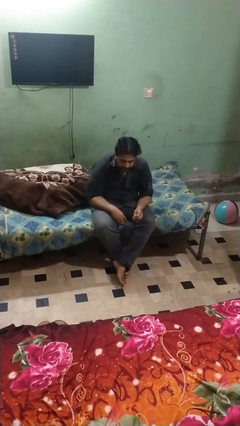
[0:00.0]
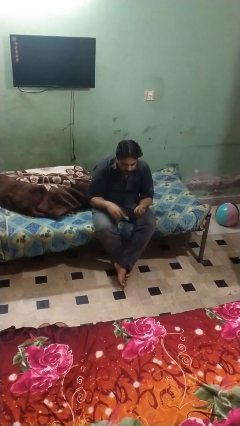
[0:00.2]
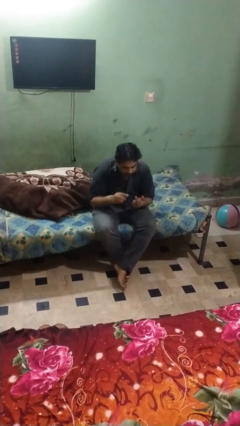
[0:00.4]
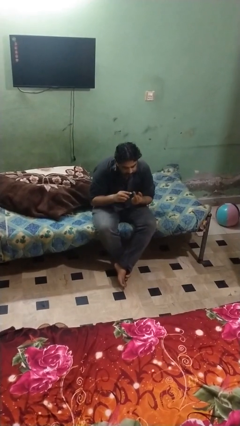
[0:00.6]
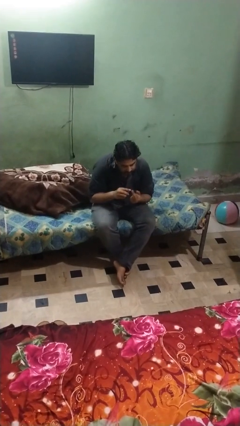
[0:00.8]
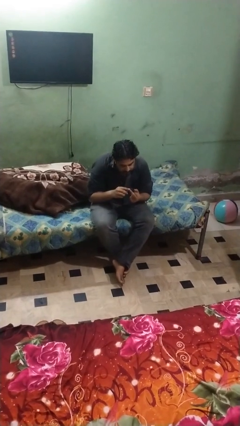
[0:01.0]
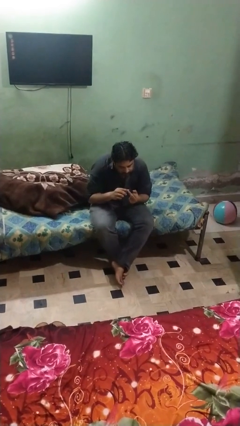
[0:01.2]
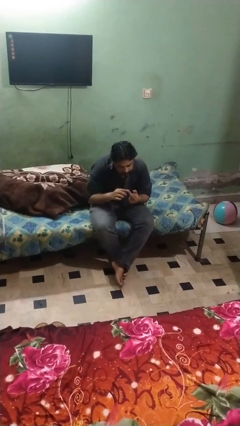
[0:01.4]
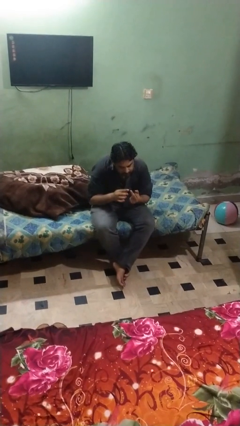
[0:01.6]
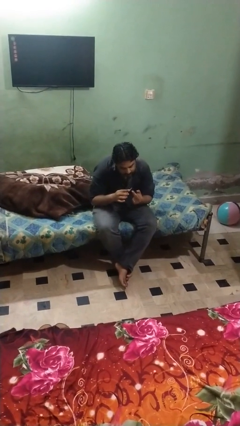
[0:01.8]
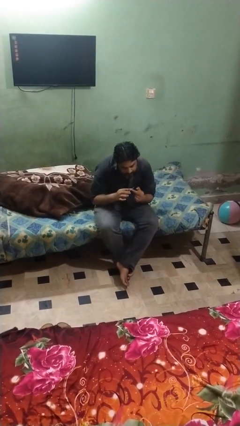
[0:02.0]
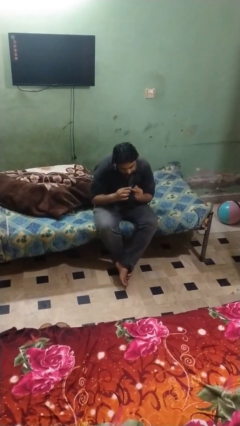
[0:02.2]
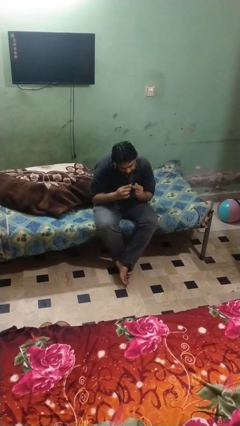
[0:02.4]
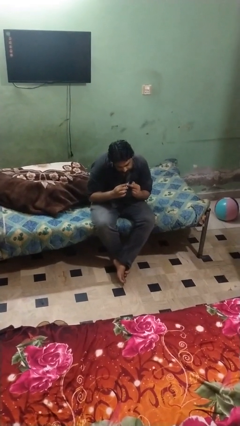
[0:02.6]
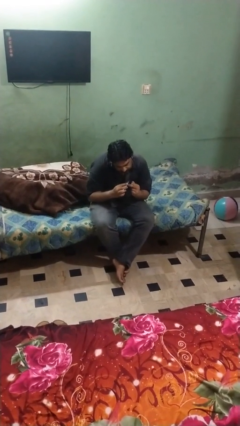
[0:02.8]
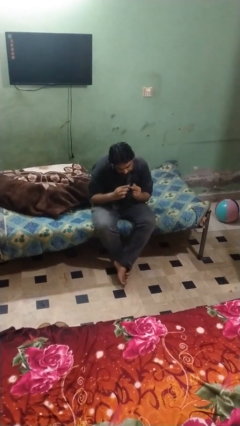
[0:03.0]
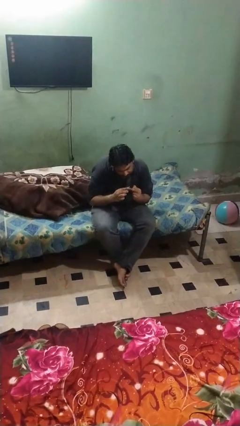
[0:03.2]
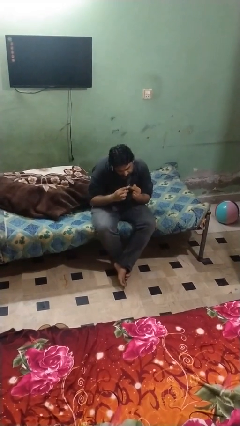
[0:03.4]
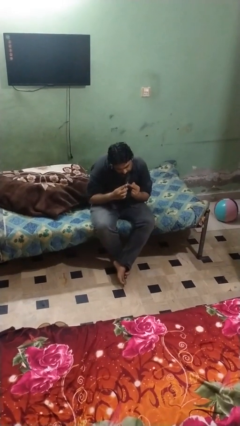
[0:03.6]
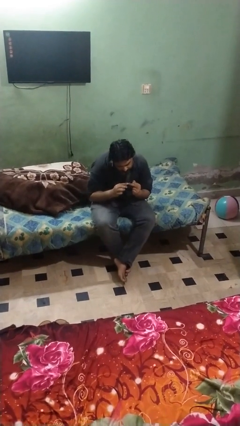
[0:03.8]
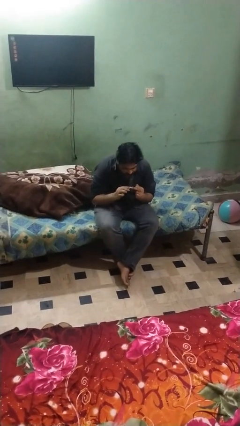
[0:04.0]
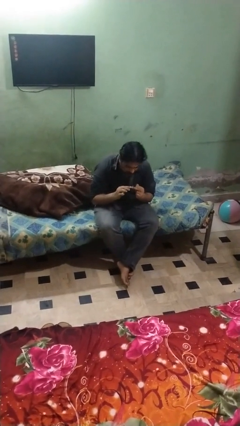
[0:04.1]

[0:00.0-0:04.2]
person files fingernails

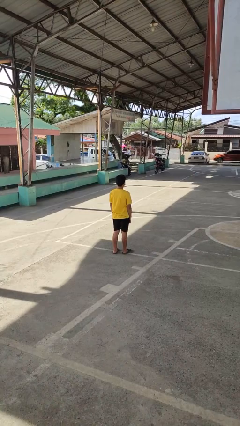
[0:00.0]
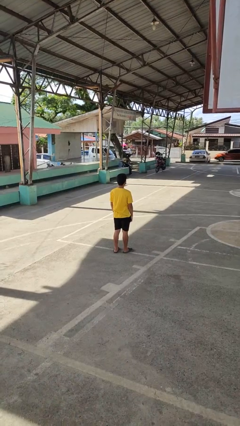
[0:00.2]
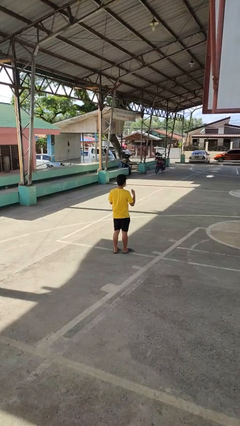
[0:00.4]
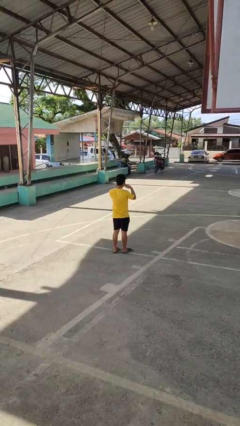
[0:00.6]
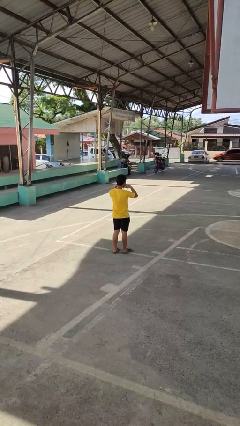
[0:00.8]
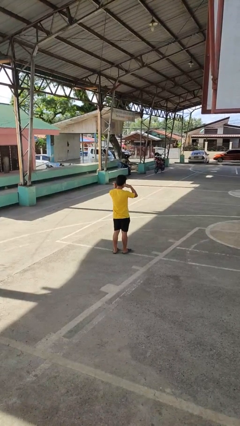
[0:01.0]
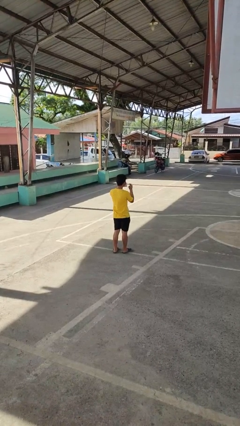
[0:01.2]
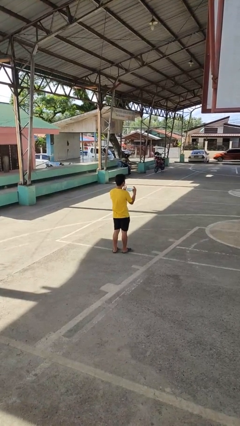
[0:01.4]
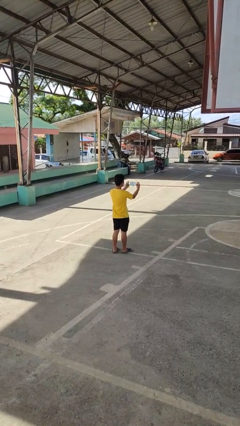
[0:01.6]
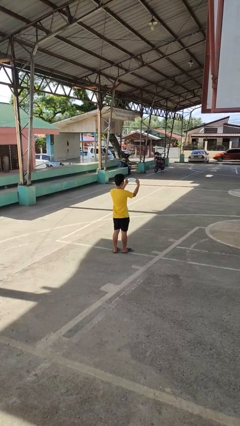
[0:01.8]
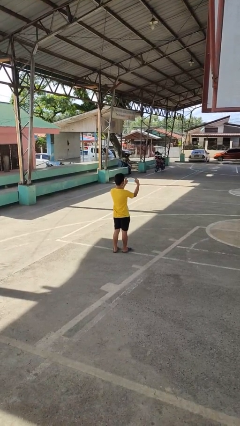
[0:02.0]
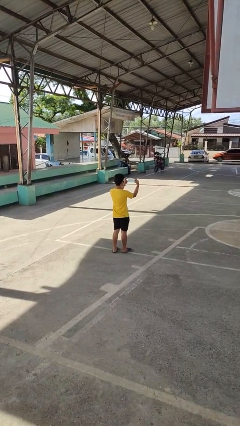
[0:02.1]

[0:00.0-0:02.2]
person takes off facemask

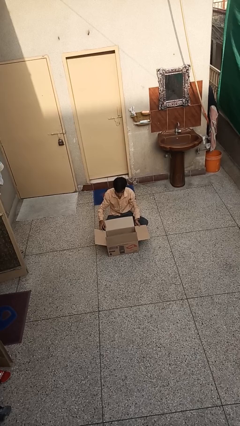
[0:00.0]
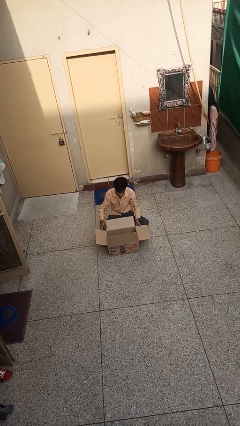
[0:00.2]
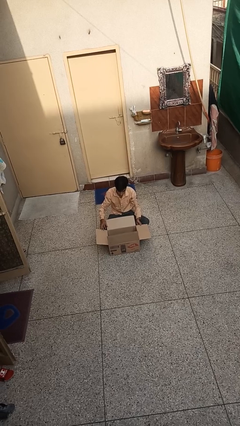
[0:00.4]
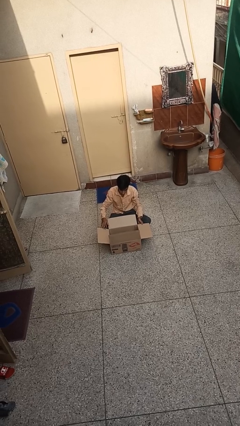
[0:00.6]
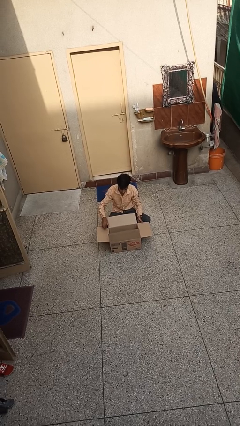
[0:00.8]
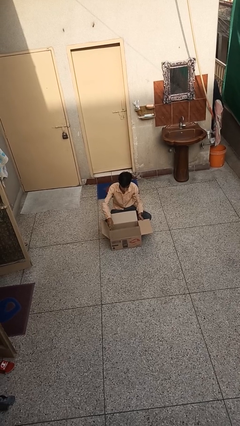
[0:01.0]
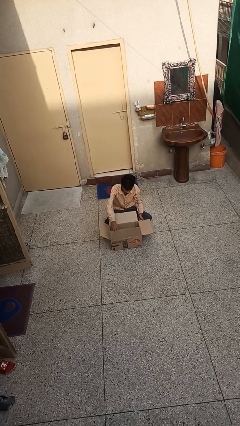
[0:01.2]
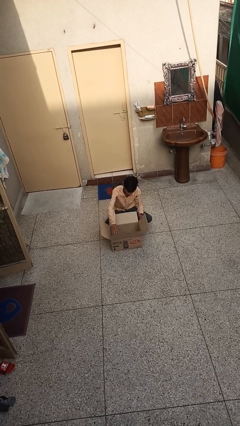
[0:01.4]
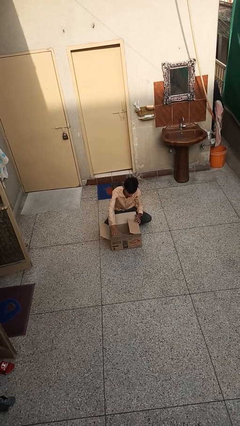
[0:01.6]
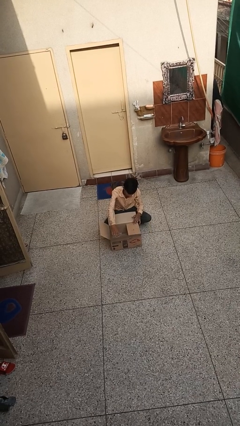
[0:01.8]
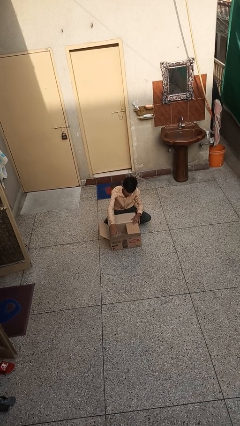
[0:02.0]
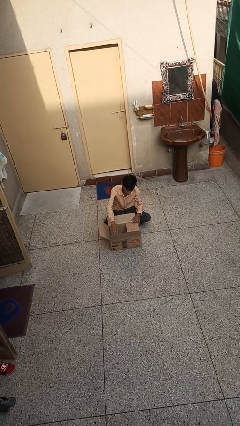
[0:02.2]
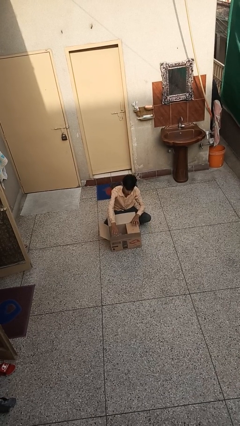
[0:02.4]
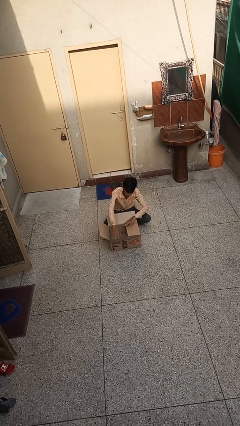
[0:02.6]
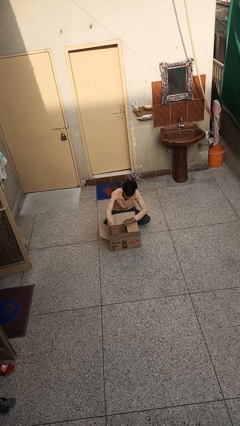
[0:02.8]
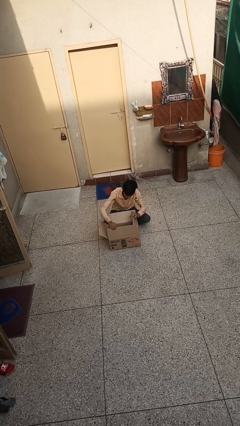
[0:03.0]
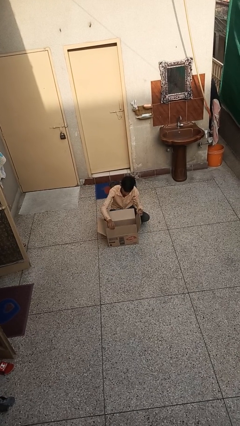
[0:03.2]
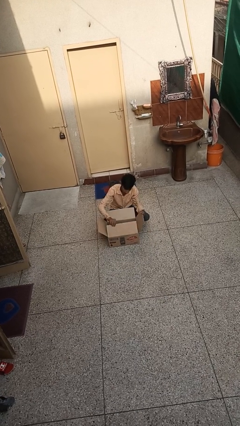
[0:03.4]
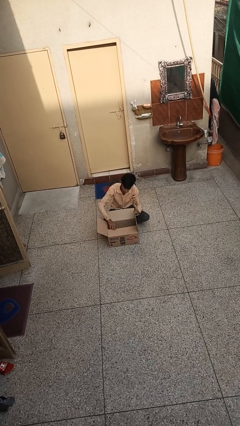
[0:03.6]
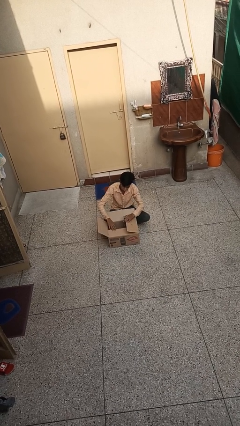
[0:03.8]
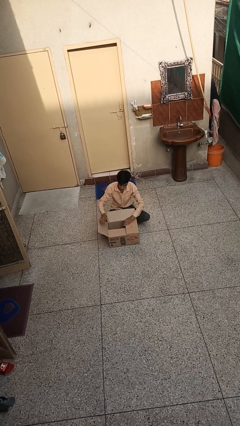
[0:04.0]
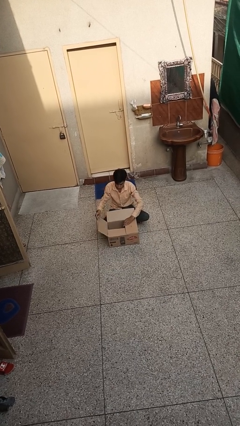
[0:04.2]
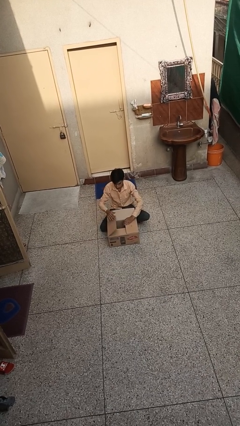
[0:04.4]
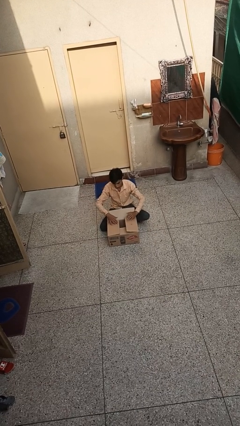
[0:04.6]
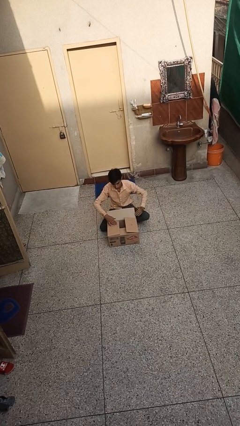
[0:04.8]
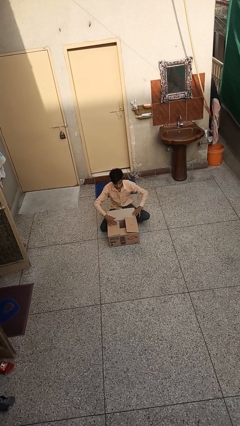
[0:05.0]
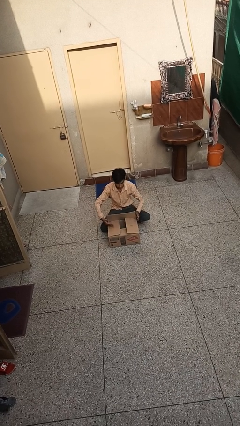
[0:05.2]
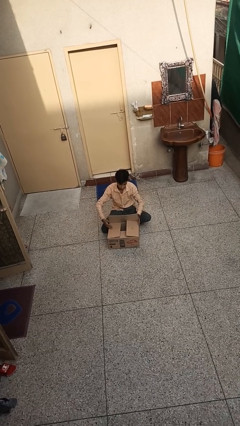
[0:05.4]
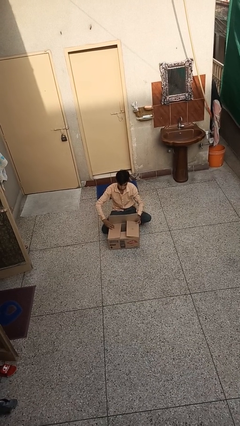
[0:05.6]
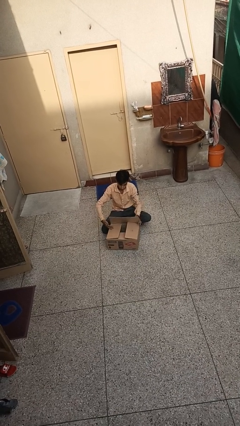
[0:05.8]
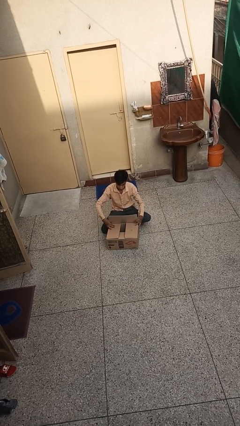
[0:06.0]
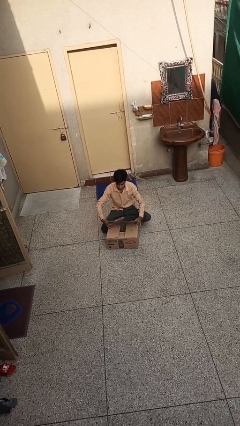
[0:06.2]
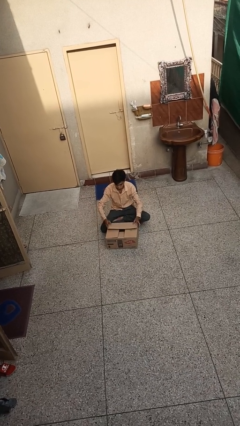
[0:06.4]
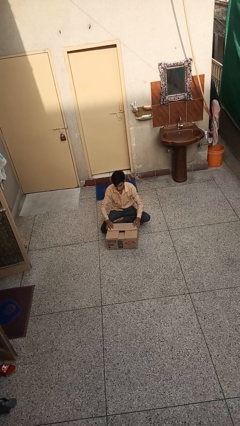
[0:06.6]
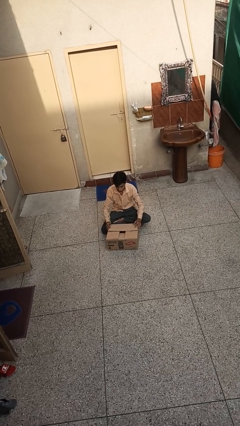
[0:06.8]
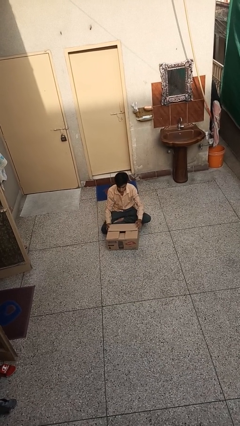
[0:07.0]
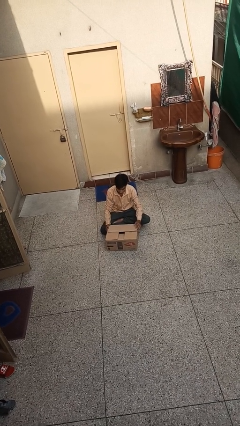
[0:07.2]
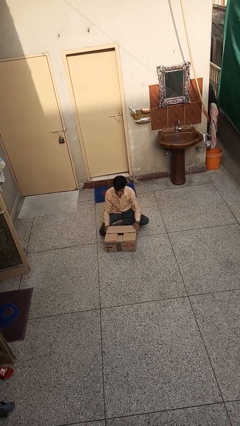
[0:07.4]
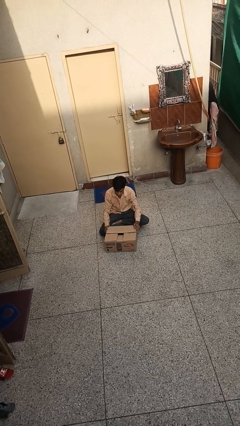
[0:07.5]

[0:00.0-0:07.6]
person closes box

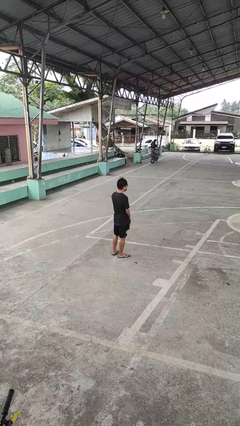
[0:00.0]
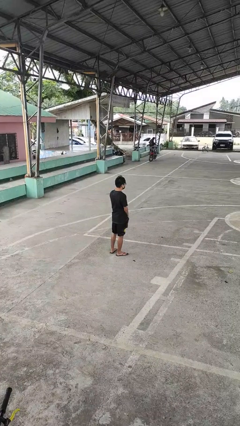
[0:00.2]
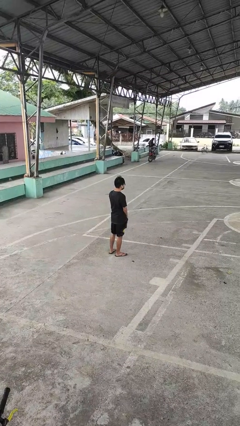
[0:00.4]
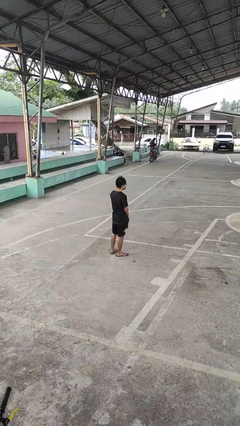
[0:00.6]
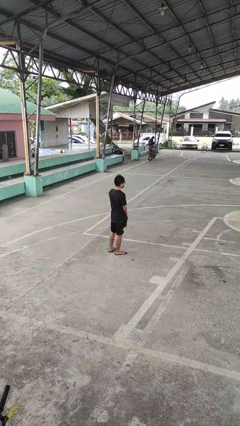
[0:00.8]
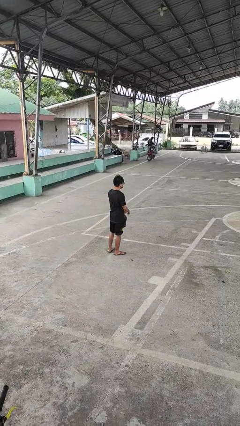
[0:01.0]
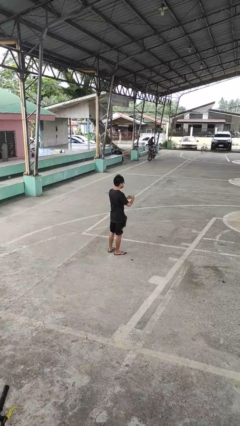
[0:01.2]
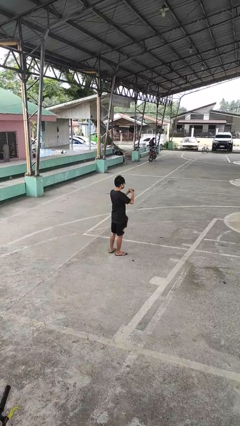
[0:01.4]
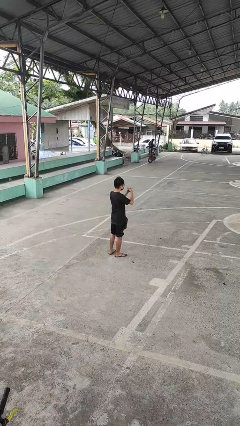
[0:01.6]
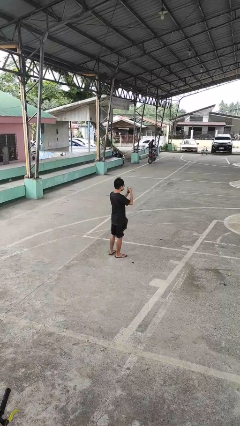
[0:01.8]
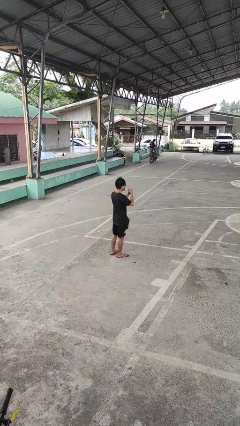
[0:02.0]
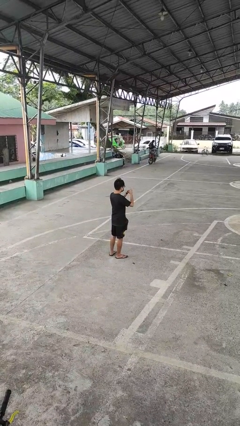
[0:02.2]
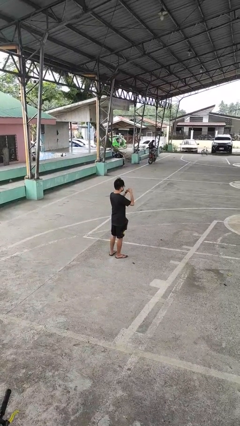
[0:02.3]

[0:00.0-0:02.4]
person cracks knuckles

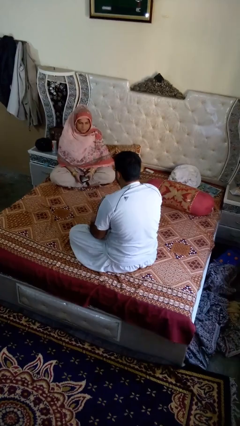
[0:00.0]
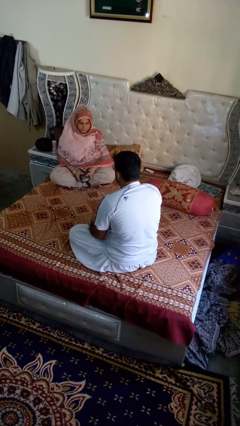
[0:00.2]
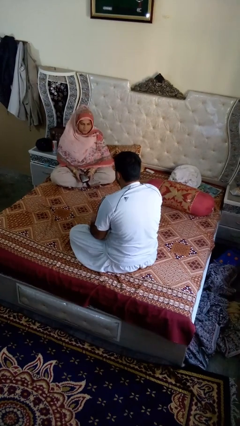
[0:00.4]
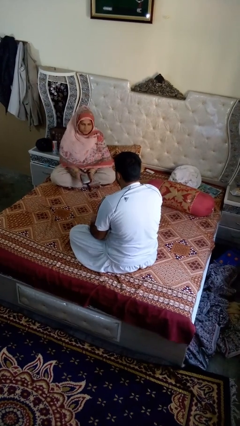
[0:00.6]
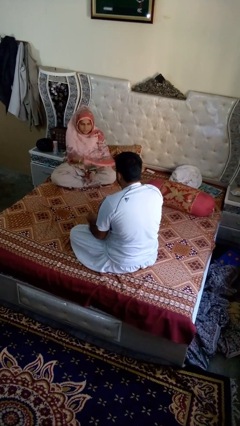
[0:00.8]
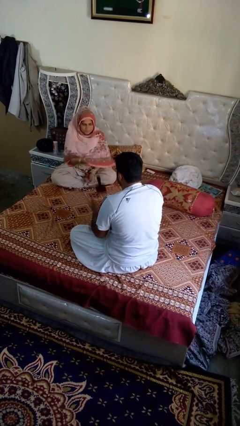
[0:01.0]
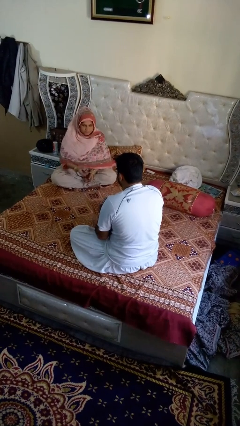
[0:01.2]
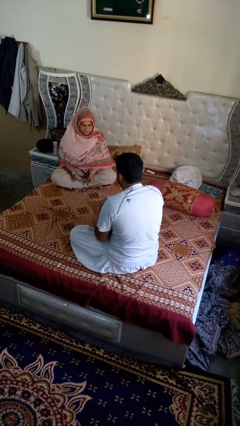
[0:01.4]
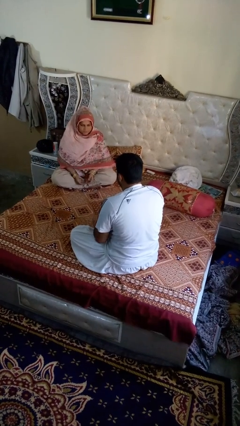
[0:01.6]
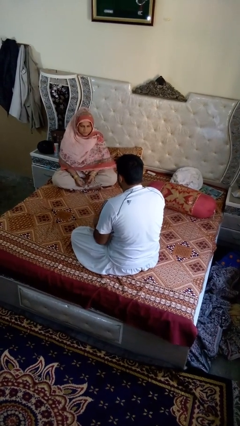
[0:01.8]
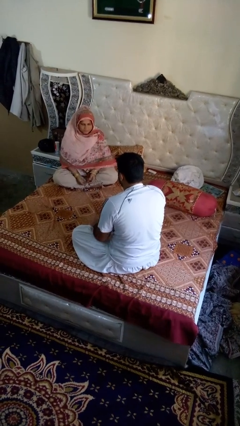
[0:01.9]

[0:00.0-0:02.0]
person catches object from person
